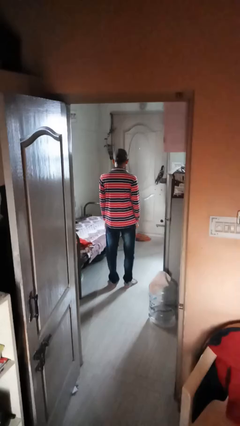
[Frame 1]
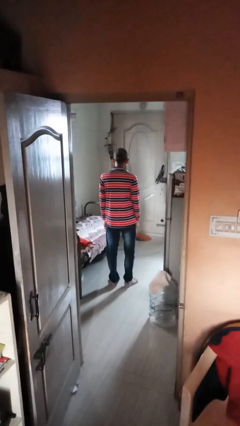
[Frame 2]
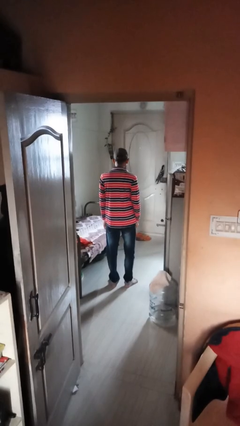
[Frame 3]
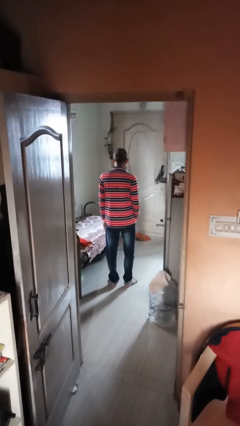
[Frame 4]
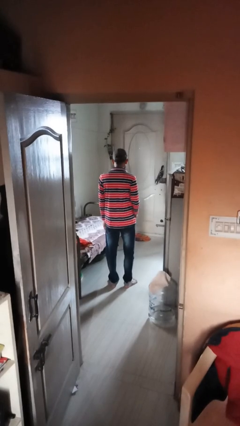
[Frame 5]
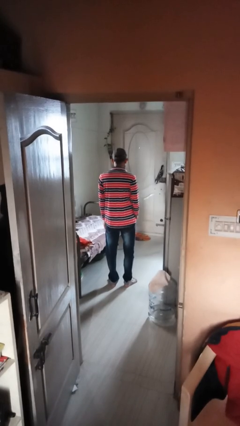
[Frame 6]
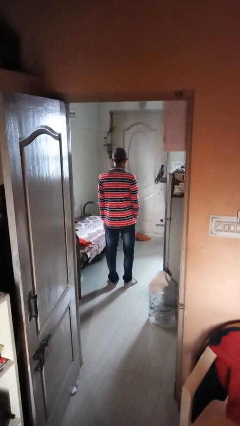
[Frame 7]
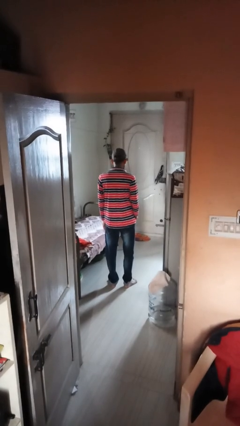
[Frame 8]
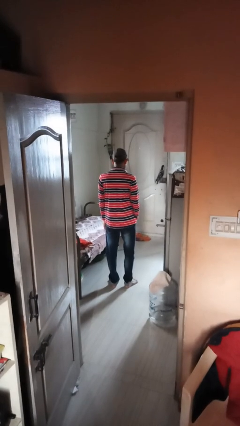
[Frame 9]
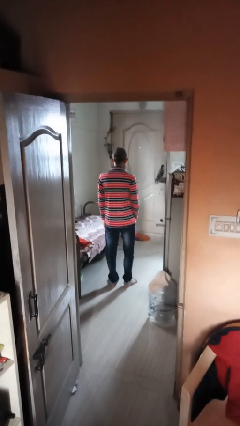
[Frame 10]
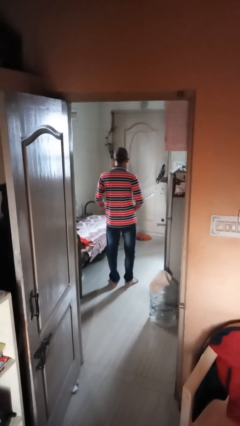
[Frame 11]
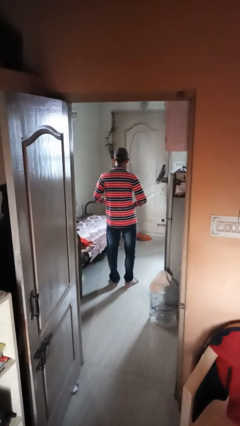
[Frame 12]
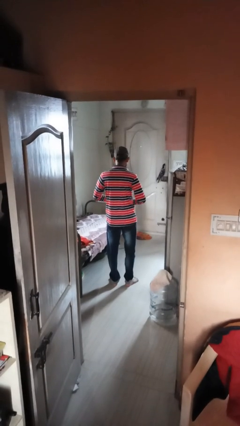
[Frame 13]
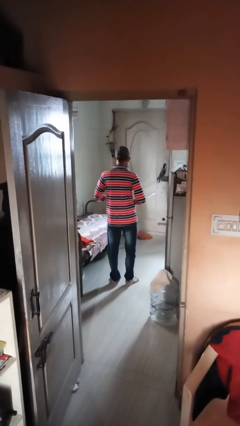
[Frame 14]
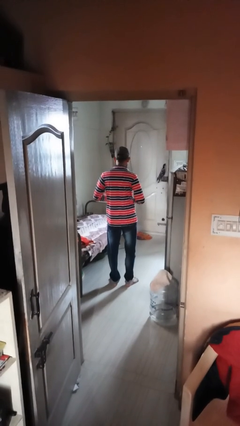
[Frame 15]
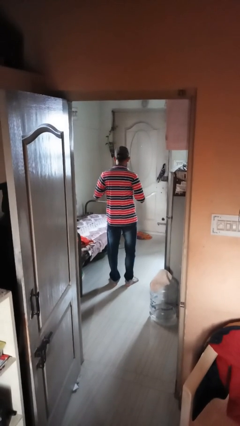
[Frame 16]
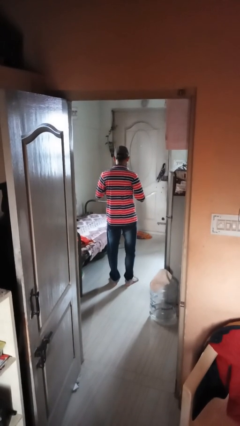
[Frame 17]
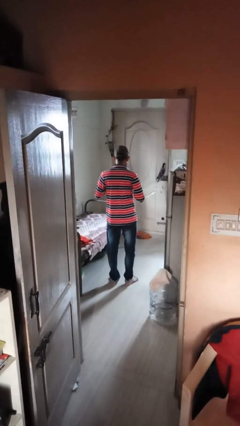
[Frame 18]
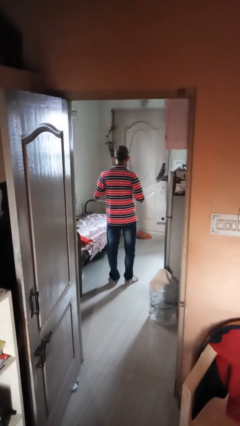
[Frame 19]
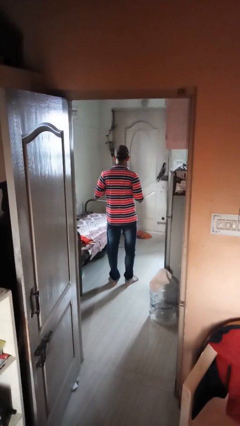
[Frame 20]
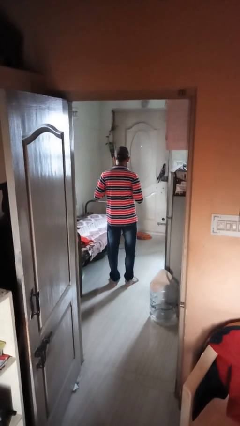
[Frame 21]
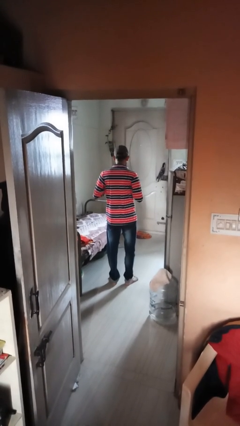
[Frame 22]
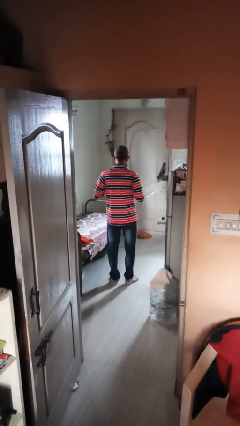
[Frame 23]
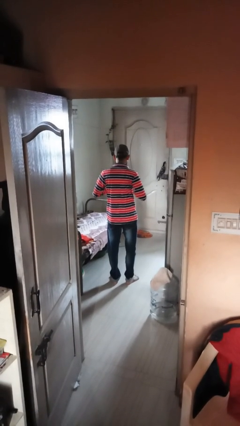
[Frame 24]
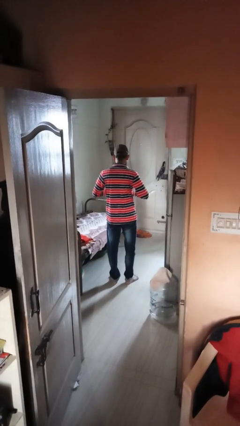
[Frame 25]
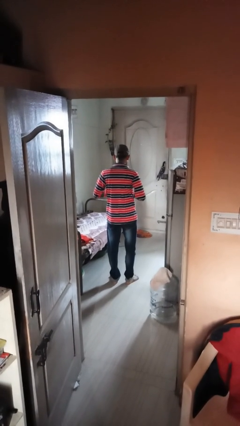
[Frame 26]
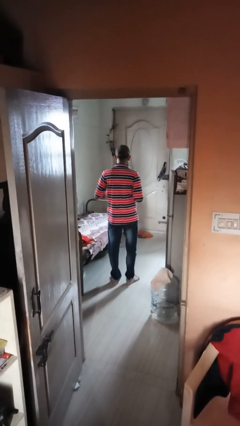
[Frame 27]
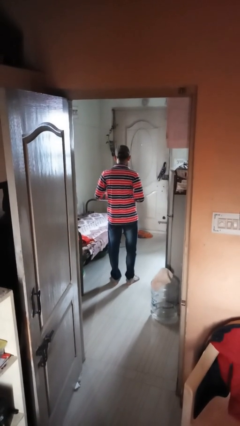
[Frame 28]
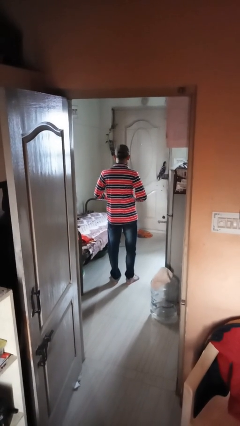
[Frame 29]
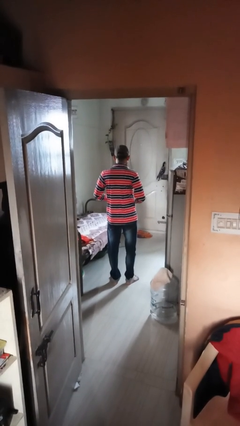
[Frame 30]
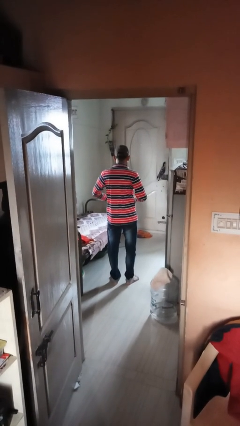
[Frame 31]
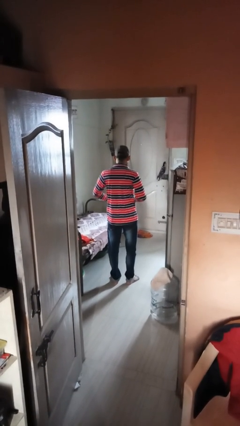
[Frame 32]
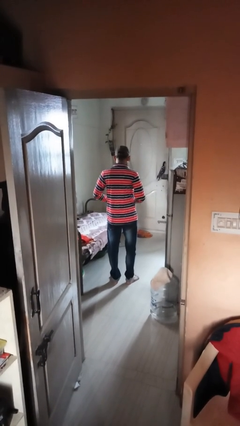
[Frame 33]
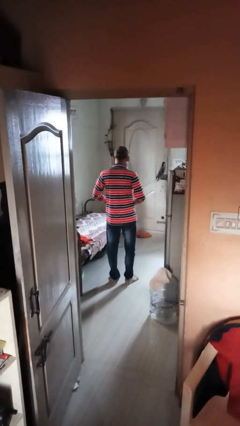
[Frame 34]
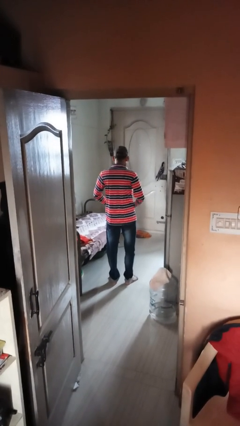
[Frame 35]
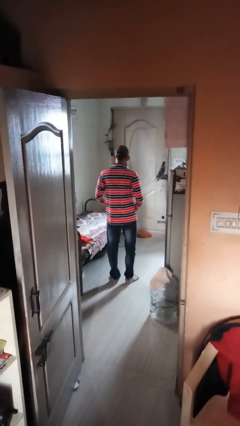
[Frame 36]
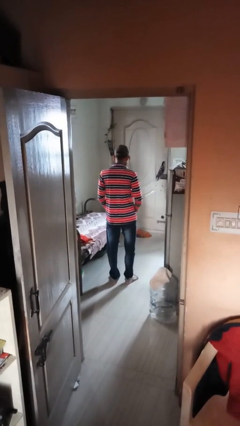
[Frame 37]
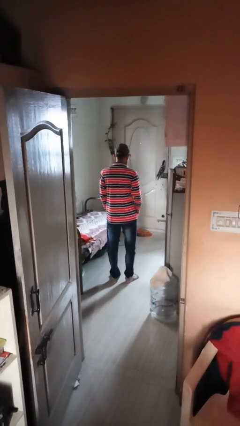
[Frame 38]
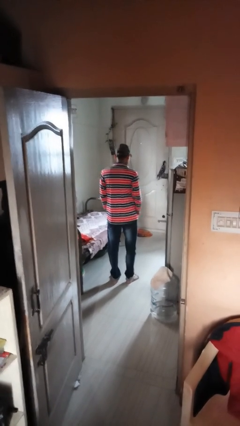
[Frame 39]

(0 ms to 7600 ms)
person unbuttons shirt

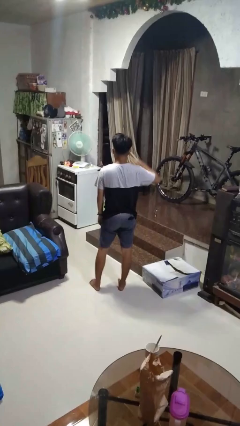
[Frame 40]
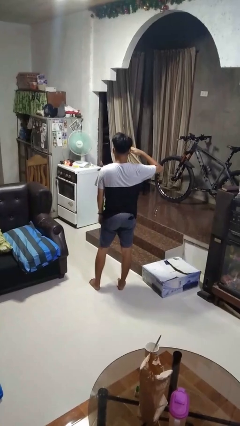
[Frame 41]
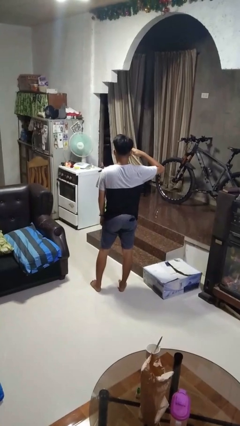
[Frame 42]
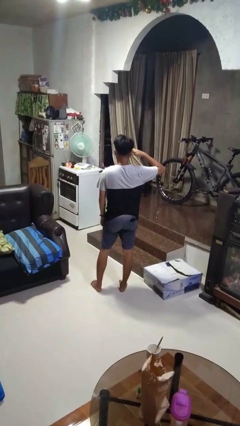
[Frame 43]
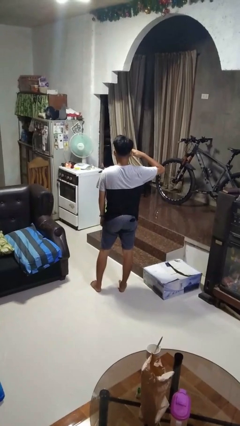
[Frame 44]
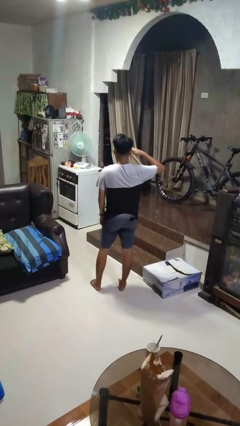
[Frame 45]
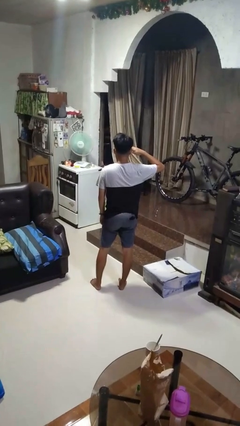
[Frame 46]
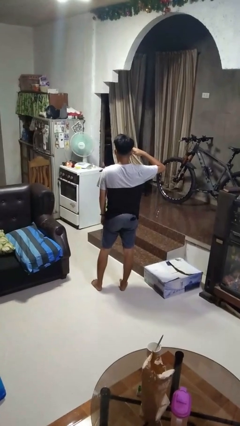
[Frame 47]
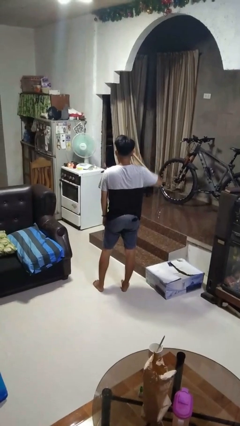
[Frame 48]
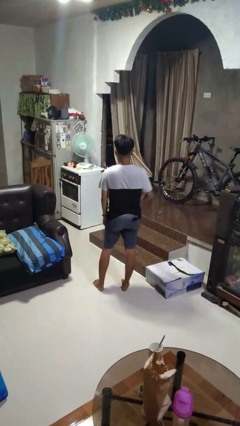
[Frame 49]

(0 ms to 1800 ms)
person salutes

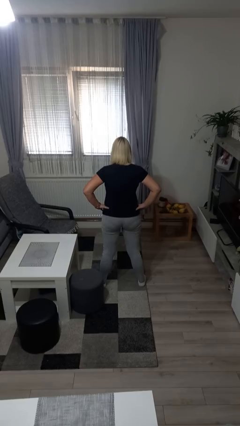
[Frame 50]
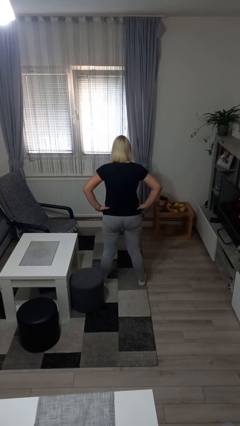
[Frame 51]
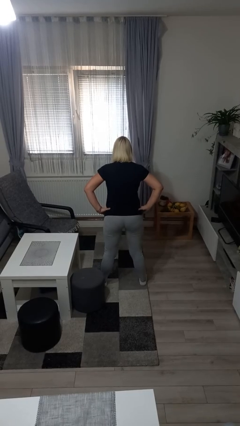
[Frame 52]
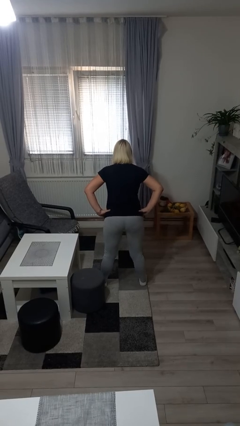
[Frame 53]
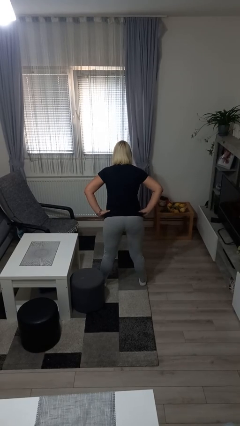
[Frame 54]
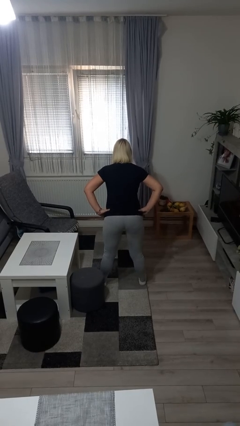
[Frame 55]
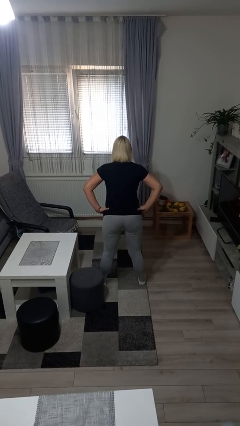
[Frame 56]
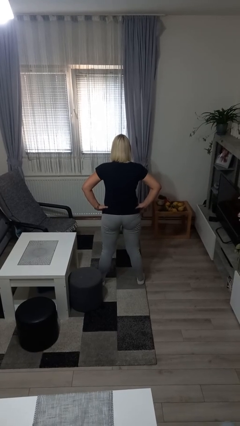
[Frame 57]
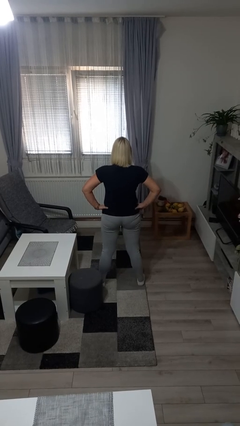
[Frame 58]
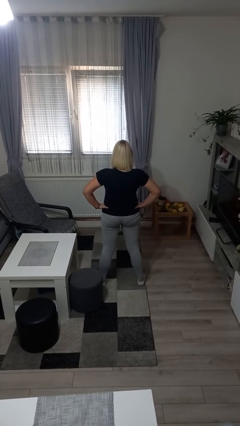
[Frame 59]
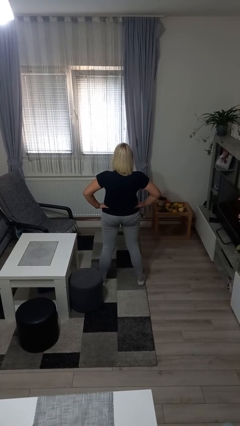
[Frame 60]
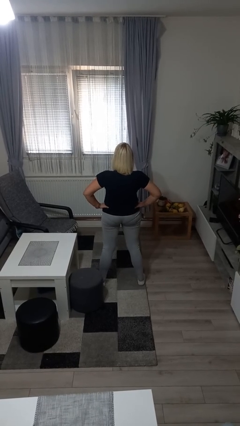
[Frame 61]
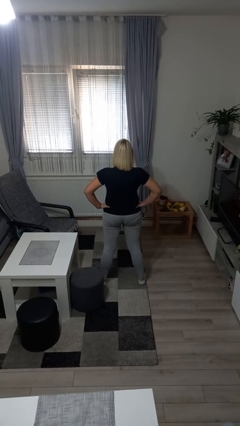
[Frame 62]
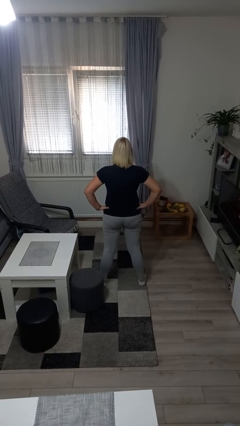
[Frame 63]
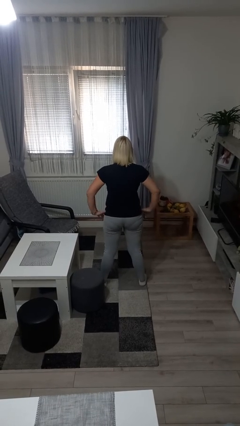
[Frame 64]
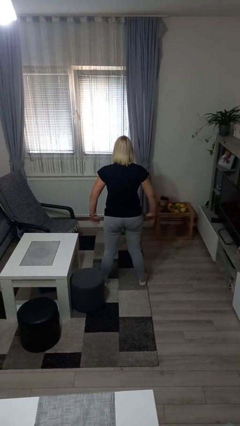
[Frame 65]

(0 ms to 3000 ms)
person wiggles hips

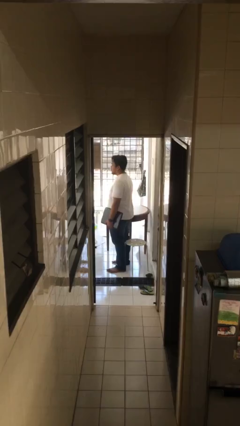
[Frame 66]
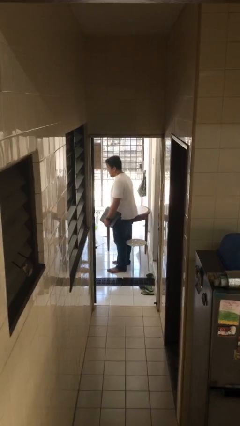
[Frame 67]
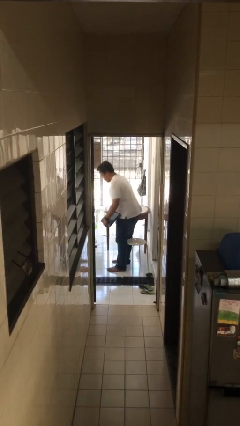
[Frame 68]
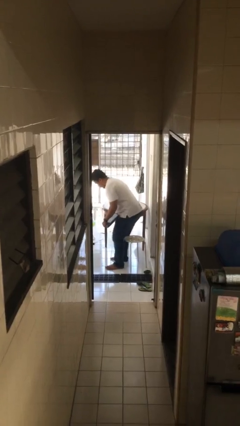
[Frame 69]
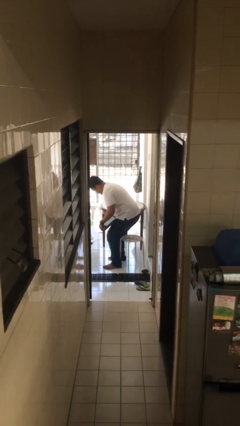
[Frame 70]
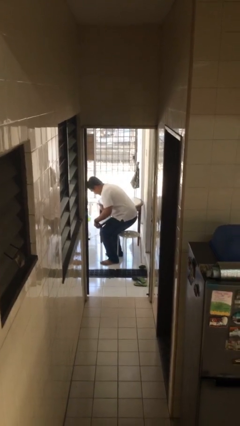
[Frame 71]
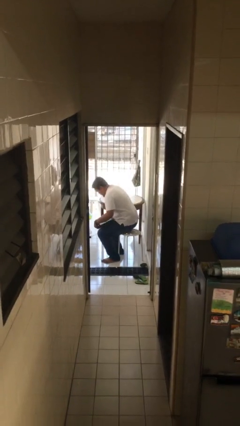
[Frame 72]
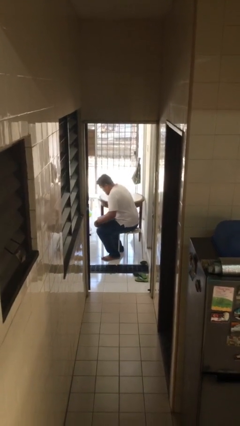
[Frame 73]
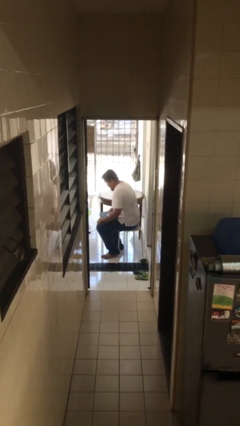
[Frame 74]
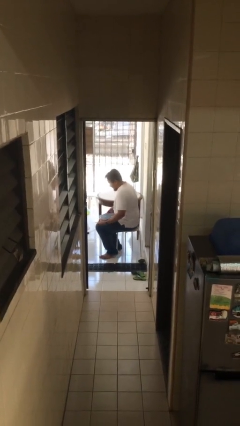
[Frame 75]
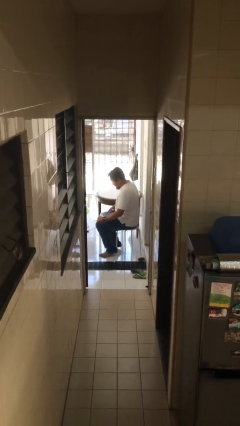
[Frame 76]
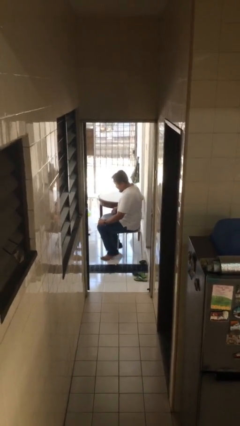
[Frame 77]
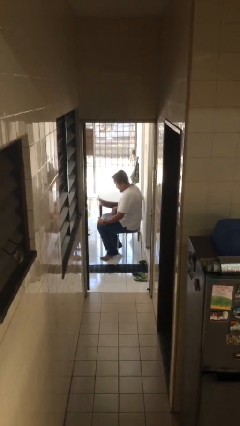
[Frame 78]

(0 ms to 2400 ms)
person sits down

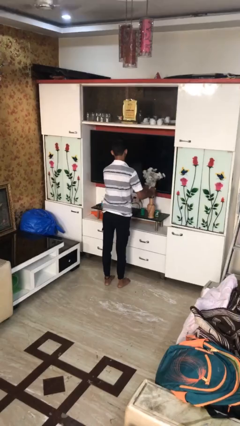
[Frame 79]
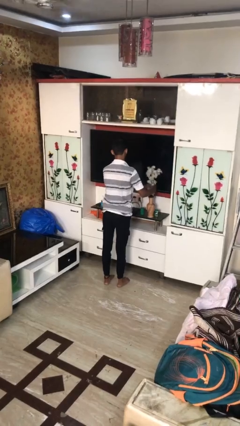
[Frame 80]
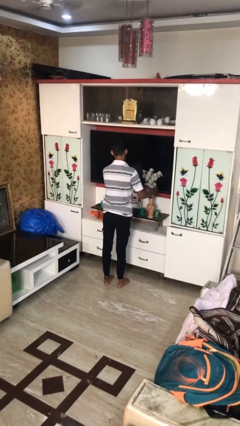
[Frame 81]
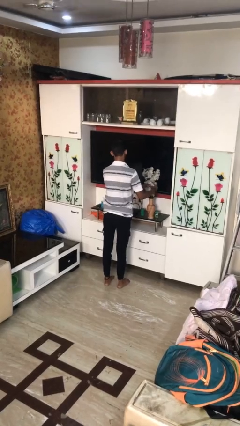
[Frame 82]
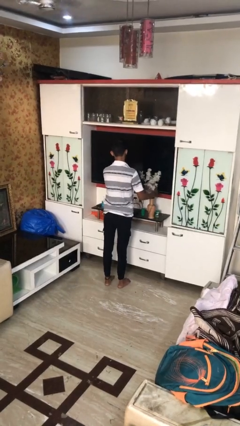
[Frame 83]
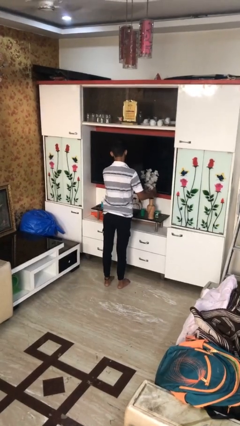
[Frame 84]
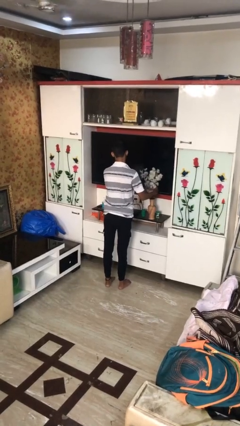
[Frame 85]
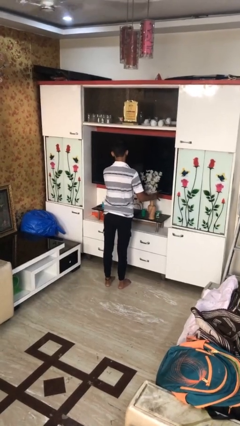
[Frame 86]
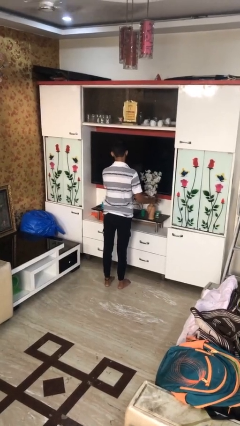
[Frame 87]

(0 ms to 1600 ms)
person arranges flowers in vase

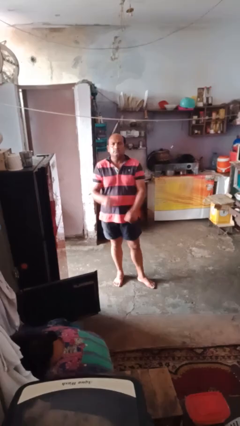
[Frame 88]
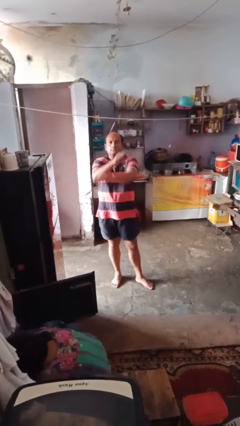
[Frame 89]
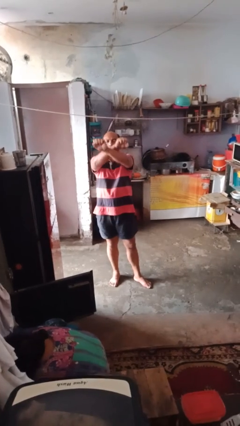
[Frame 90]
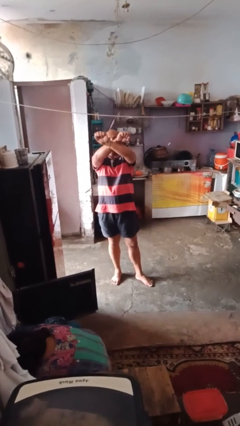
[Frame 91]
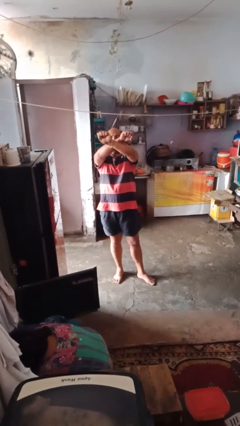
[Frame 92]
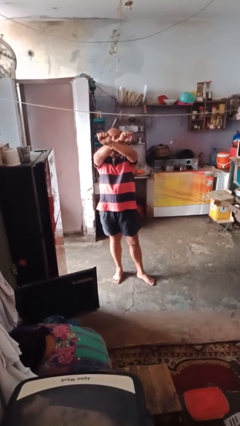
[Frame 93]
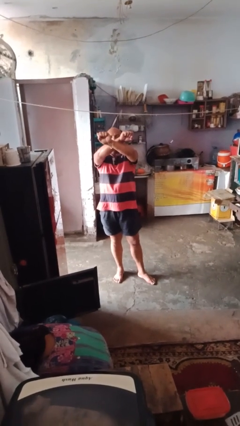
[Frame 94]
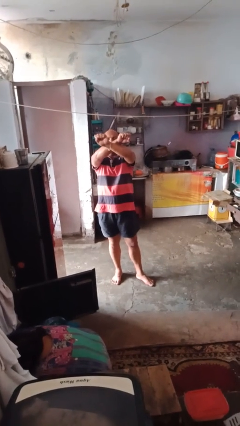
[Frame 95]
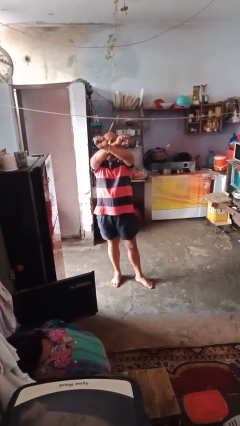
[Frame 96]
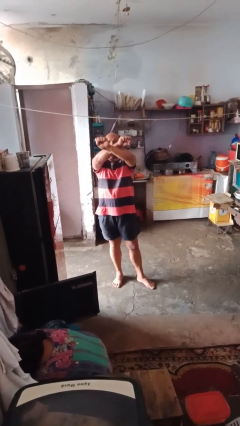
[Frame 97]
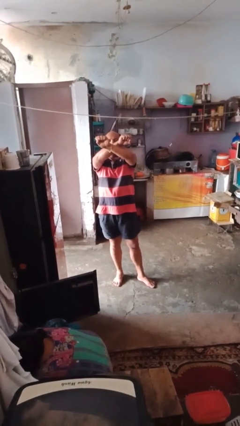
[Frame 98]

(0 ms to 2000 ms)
person gestures arms x
